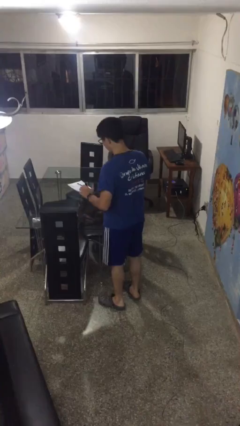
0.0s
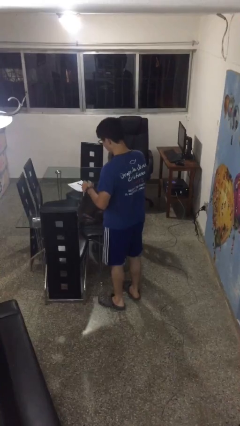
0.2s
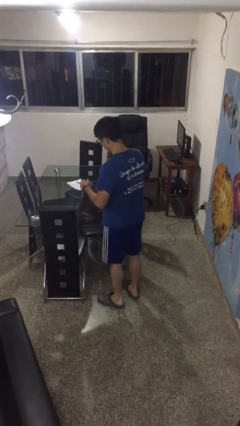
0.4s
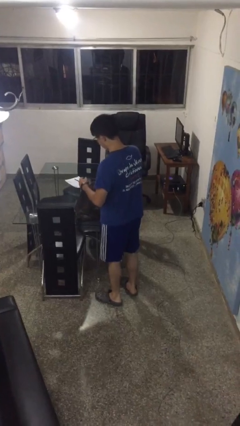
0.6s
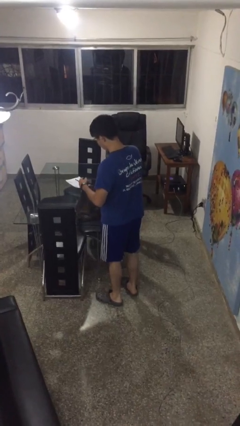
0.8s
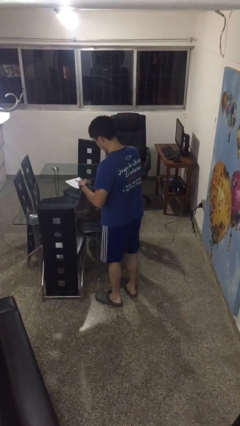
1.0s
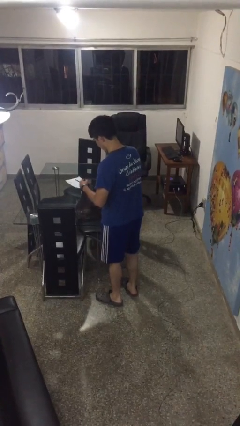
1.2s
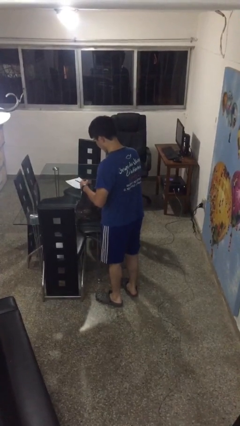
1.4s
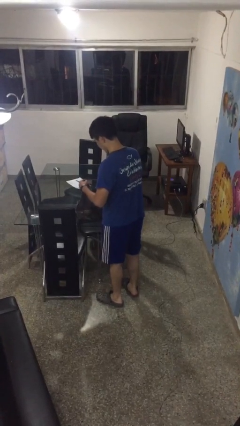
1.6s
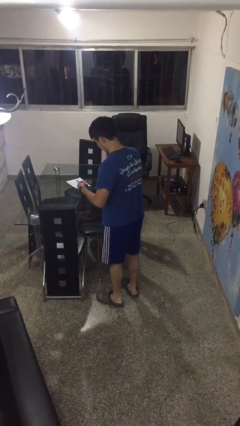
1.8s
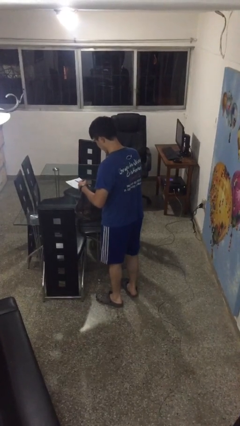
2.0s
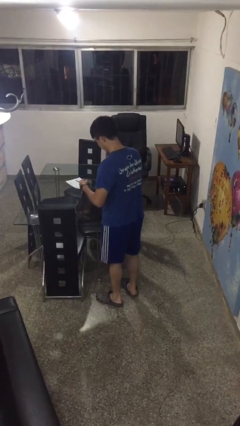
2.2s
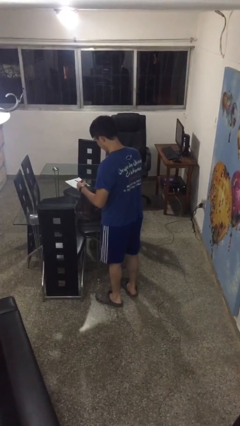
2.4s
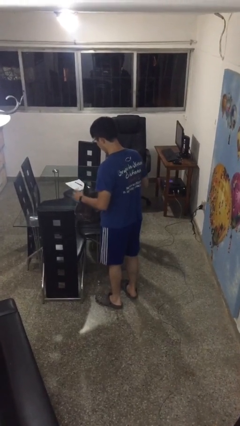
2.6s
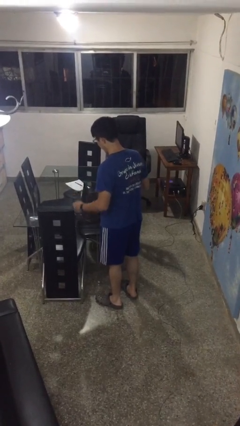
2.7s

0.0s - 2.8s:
person searches in bag

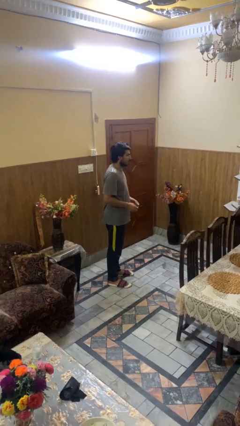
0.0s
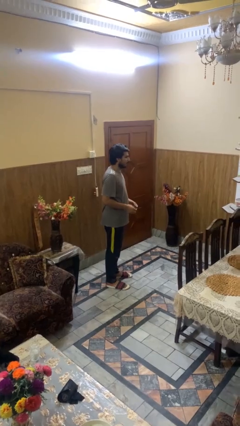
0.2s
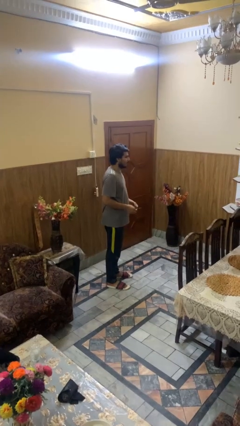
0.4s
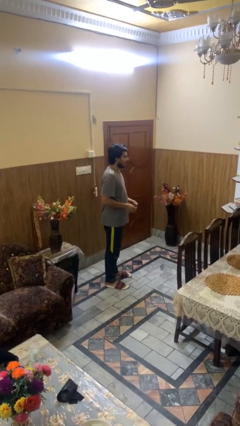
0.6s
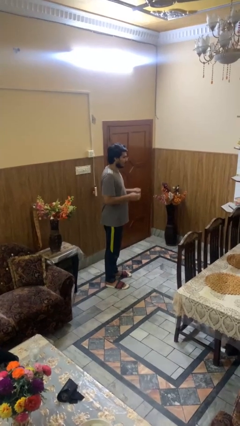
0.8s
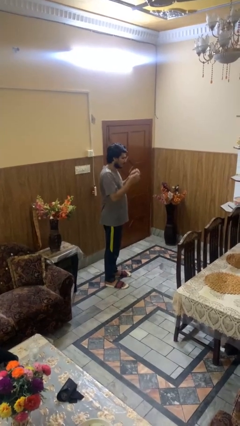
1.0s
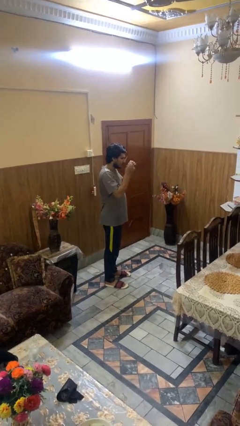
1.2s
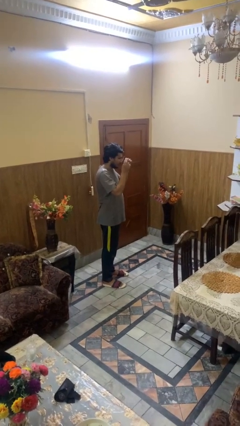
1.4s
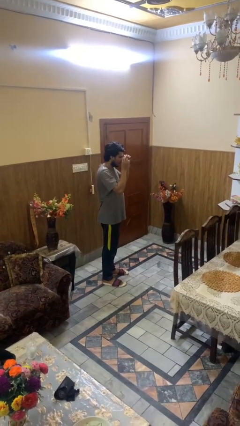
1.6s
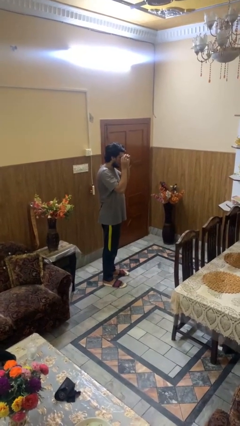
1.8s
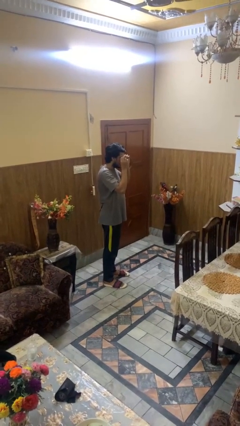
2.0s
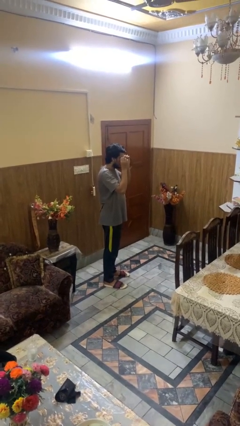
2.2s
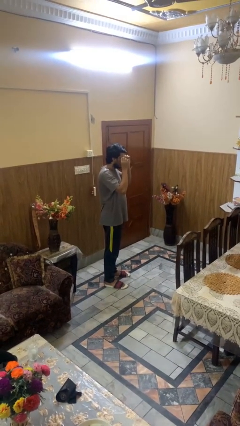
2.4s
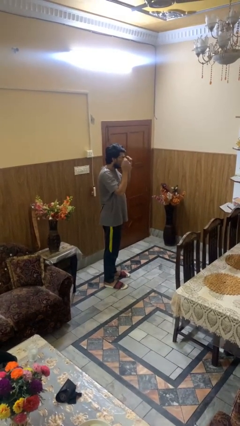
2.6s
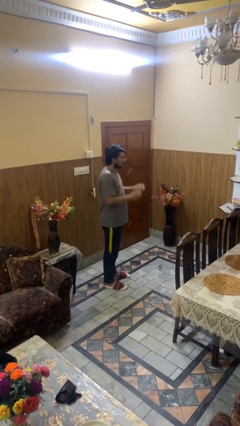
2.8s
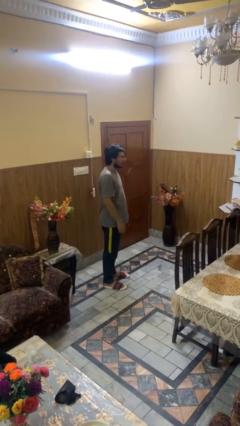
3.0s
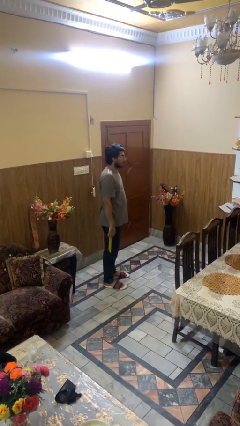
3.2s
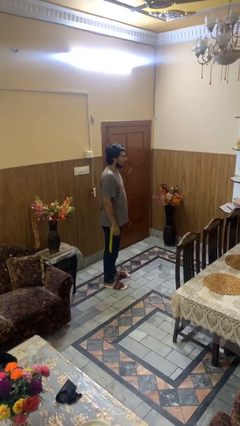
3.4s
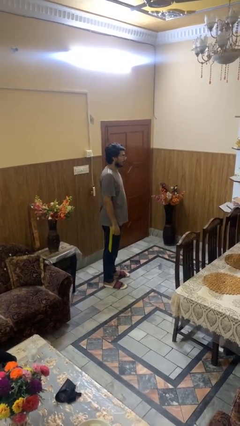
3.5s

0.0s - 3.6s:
person puts on glasses

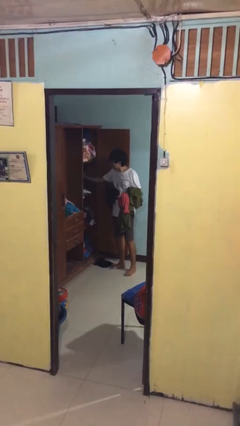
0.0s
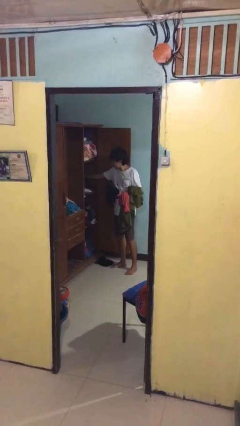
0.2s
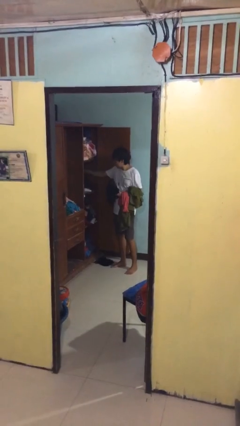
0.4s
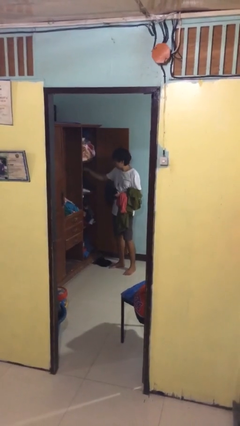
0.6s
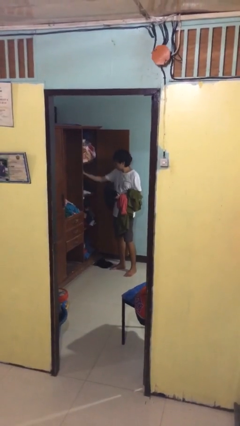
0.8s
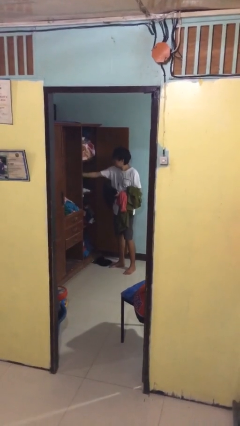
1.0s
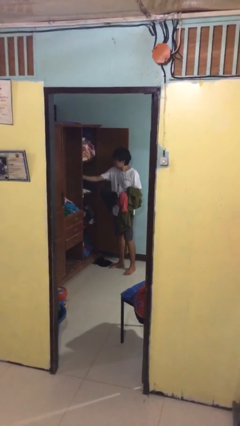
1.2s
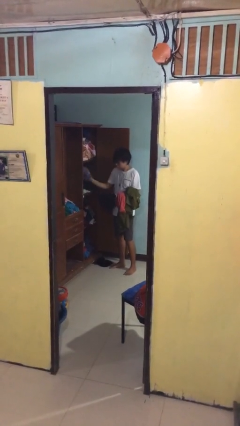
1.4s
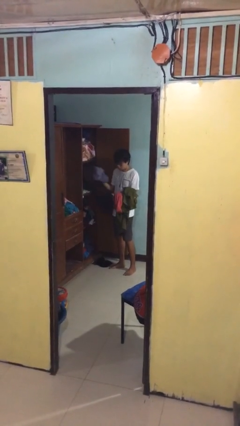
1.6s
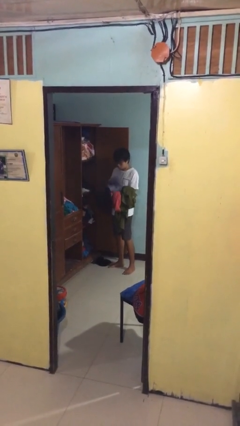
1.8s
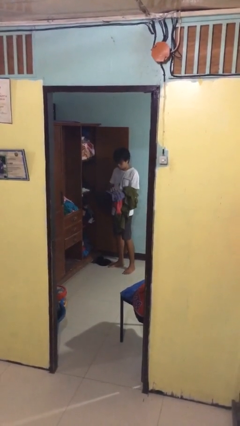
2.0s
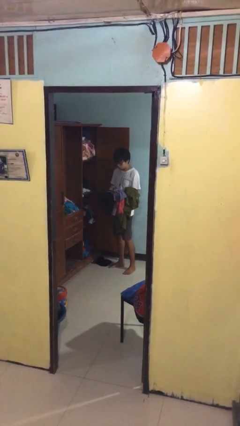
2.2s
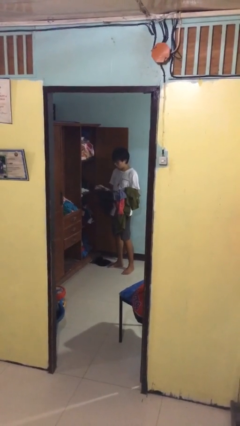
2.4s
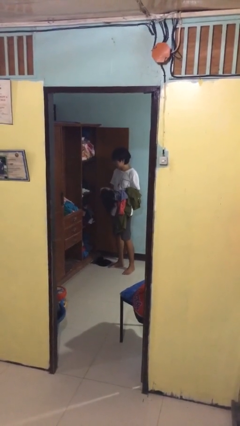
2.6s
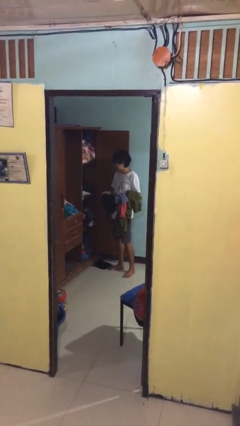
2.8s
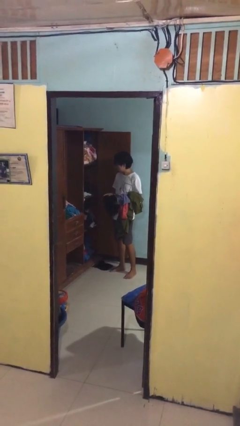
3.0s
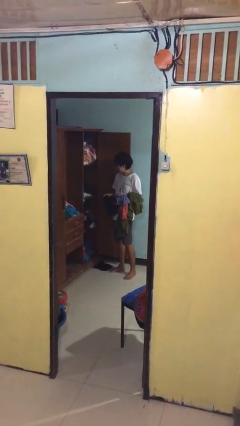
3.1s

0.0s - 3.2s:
person takes clothes from dresser

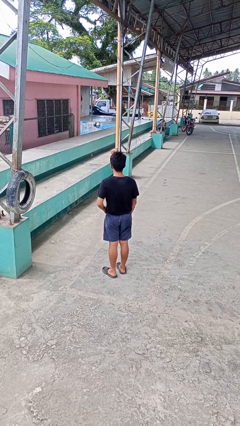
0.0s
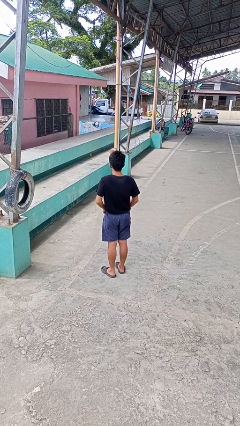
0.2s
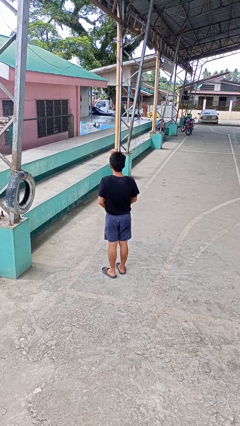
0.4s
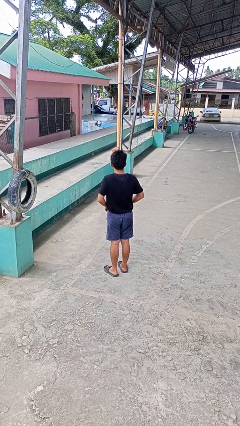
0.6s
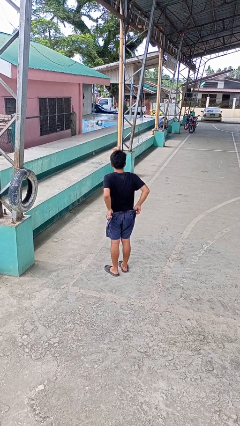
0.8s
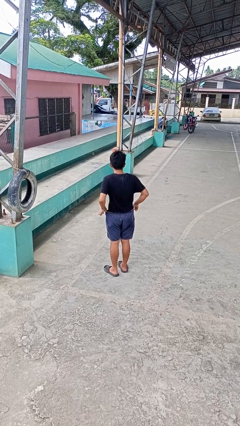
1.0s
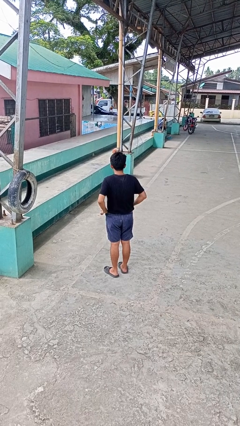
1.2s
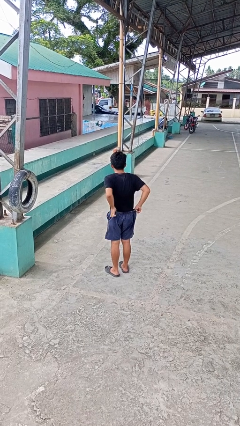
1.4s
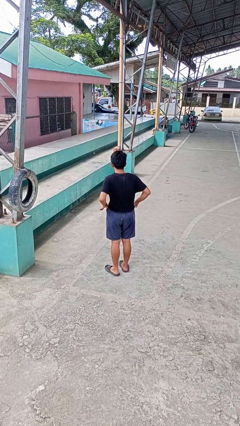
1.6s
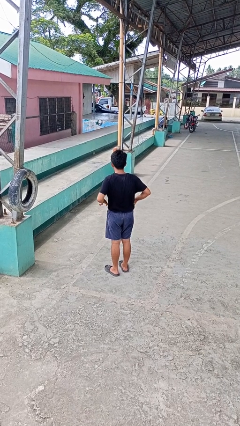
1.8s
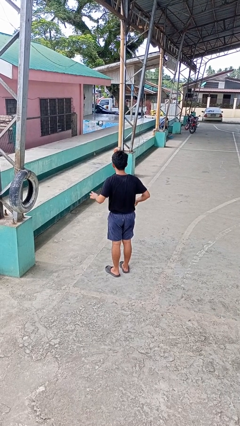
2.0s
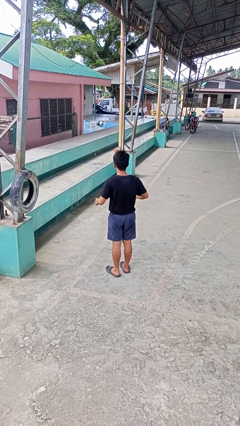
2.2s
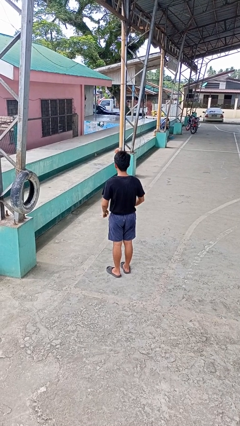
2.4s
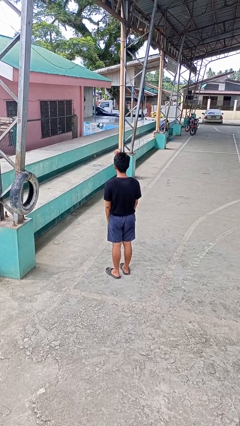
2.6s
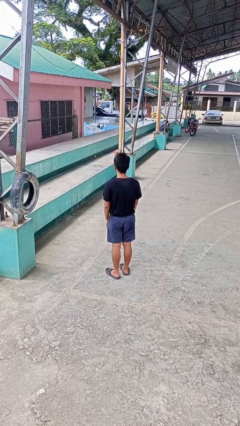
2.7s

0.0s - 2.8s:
person hikes up pants

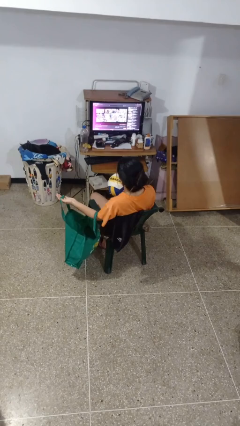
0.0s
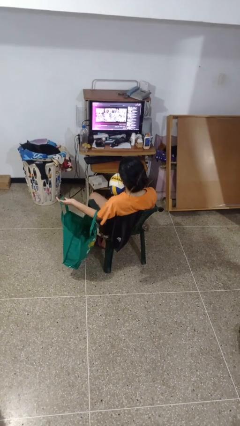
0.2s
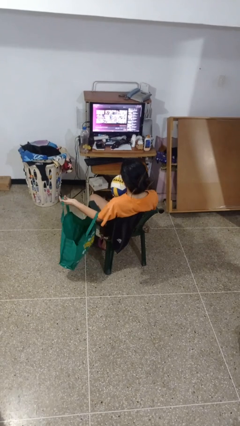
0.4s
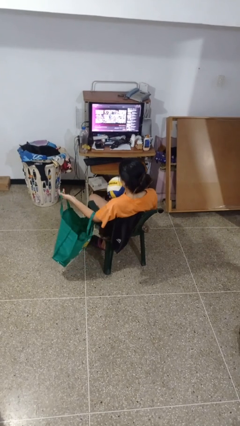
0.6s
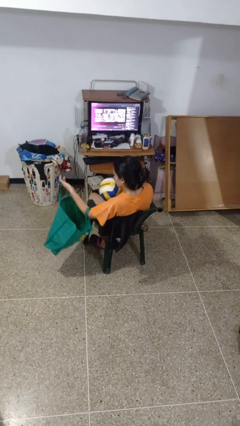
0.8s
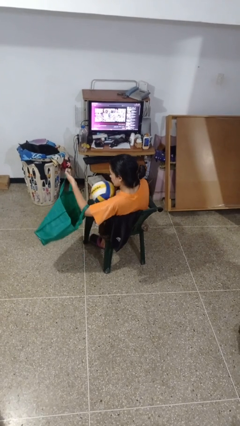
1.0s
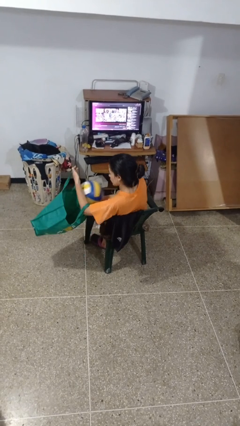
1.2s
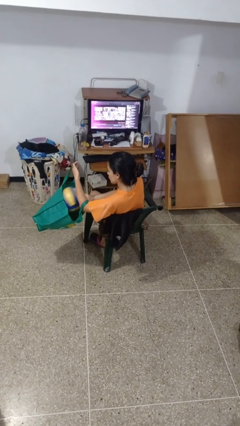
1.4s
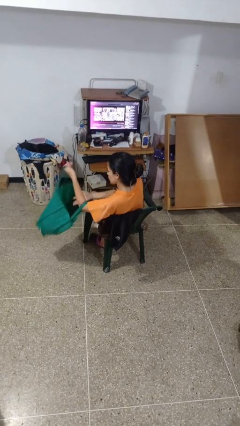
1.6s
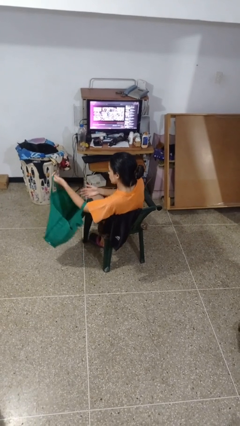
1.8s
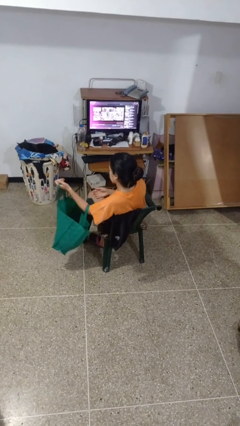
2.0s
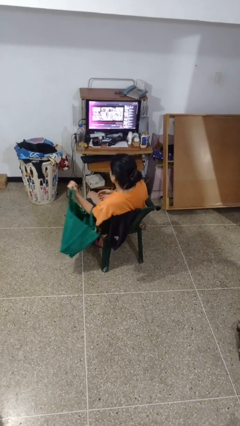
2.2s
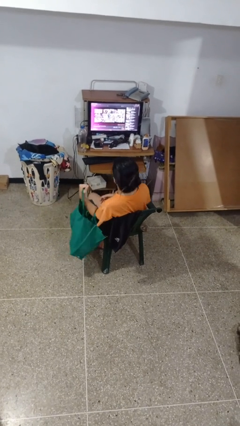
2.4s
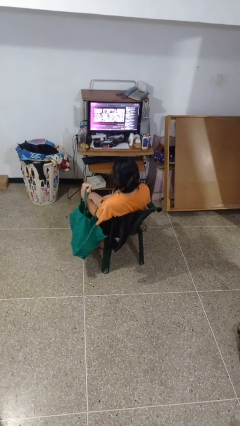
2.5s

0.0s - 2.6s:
person puts object into bag

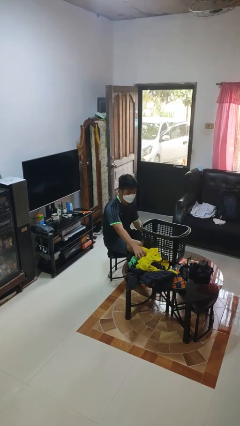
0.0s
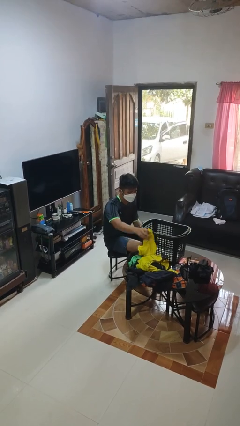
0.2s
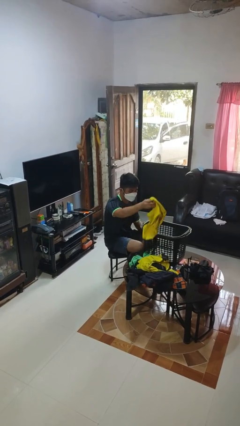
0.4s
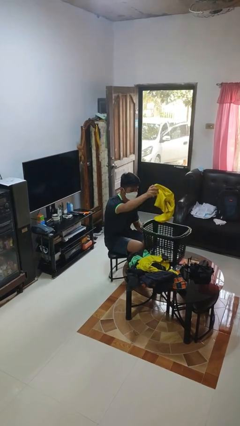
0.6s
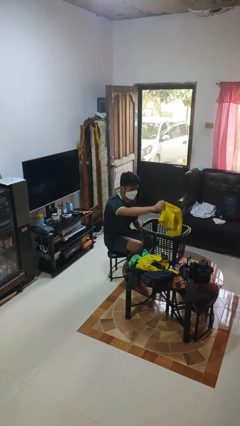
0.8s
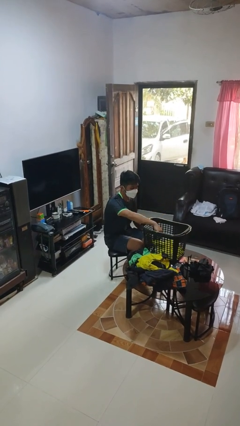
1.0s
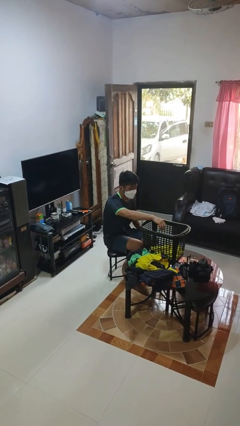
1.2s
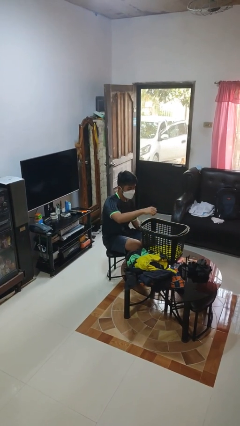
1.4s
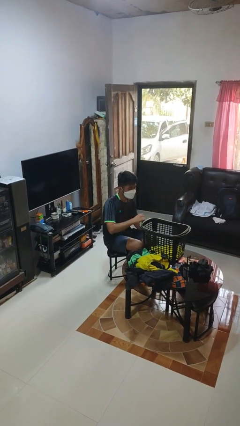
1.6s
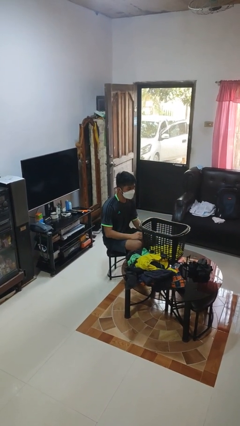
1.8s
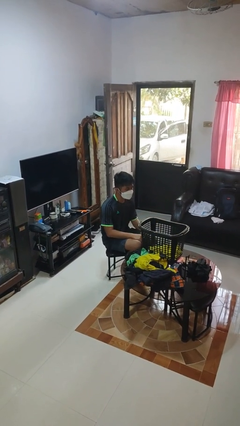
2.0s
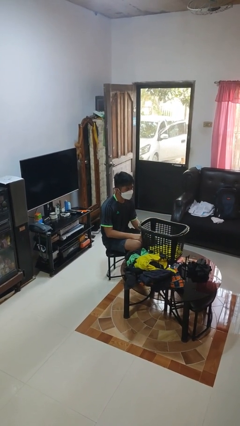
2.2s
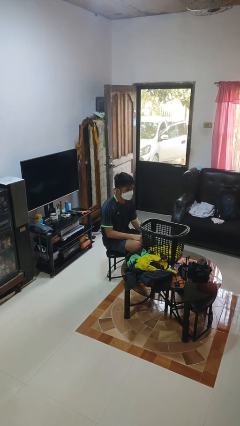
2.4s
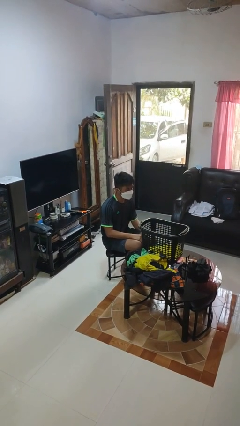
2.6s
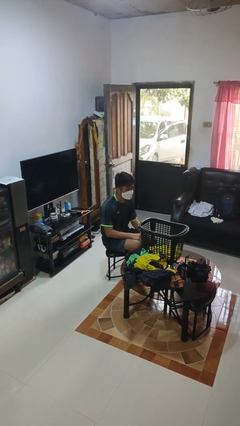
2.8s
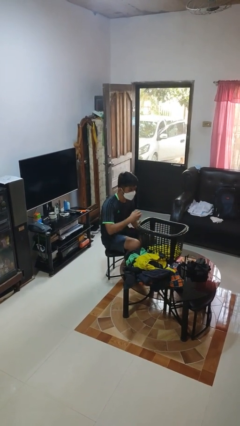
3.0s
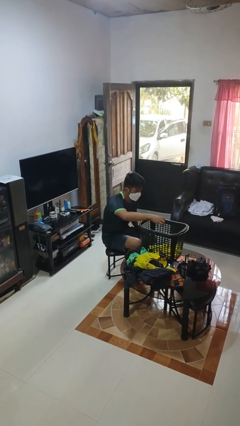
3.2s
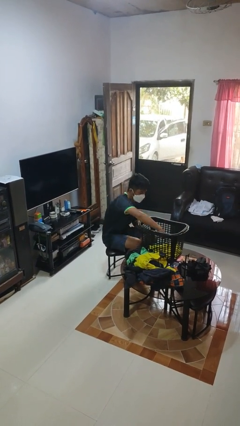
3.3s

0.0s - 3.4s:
person puts object into basket
